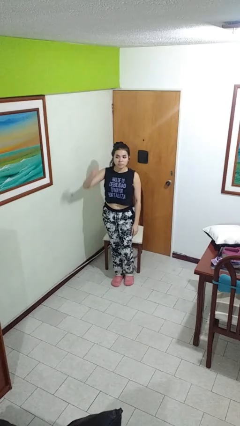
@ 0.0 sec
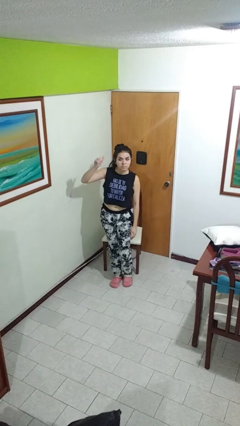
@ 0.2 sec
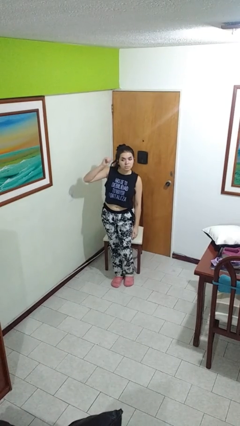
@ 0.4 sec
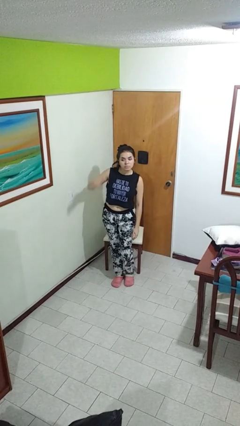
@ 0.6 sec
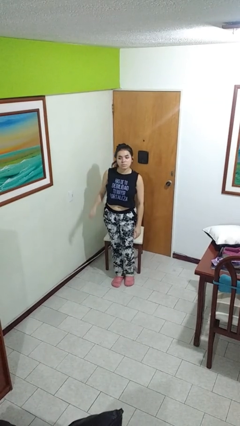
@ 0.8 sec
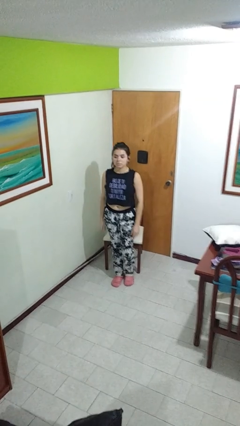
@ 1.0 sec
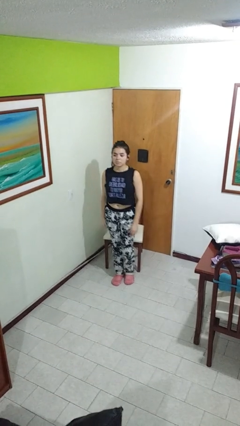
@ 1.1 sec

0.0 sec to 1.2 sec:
person gestures behind me

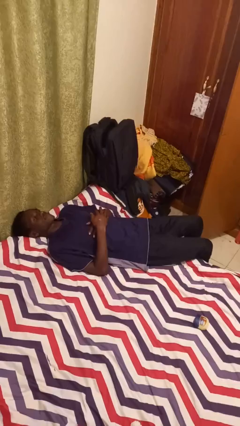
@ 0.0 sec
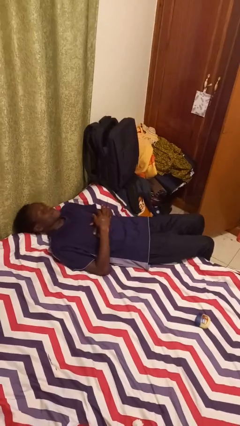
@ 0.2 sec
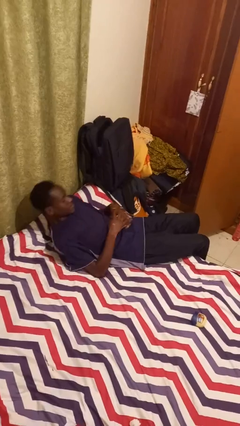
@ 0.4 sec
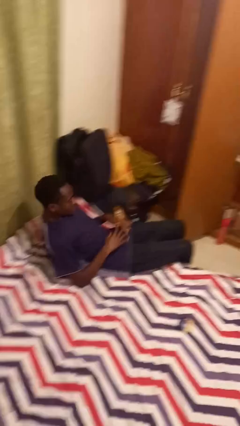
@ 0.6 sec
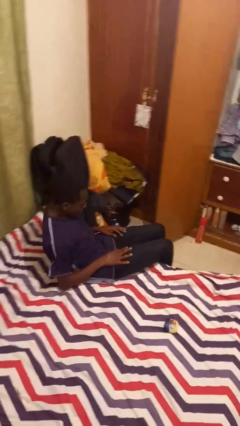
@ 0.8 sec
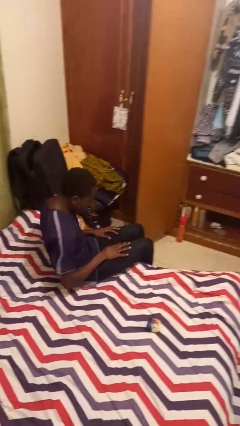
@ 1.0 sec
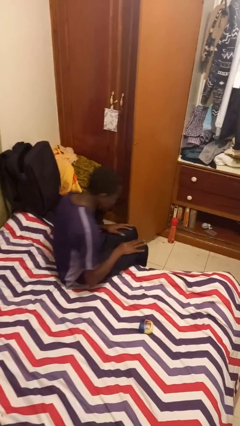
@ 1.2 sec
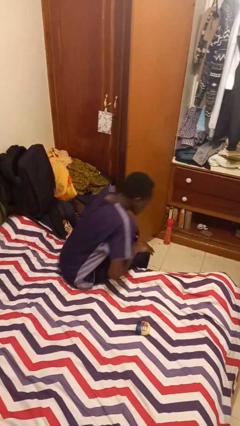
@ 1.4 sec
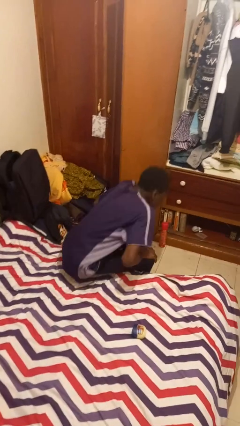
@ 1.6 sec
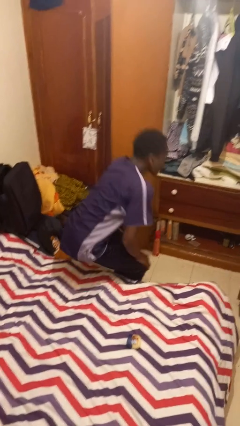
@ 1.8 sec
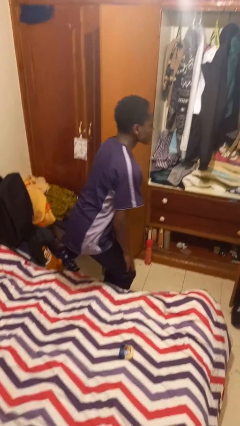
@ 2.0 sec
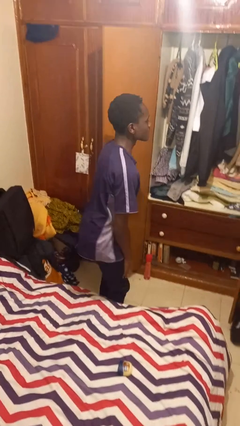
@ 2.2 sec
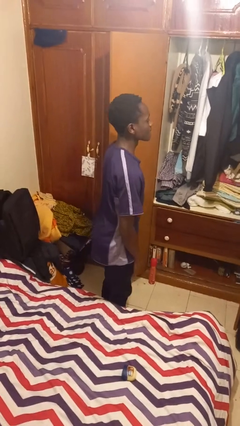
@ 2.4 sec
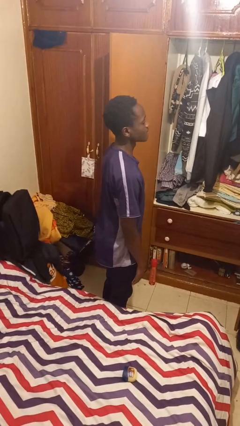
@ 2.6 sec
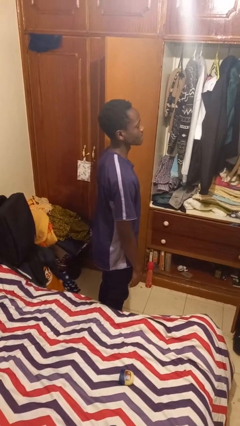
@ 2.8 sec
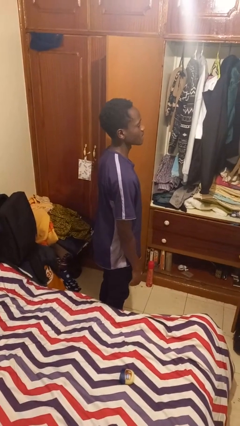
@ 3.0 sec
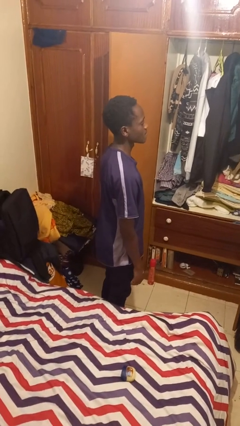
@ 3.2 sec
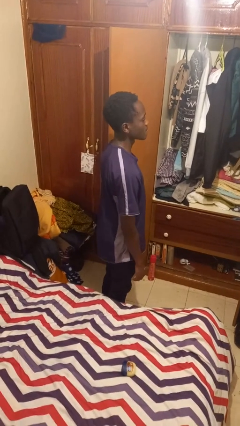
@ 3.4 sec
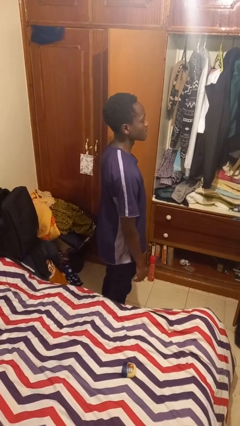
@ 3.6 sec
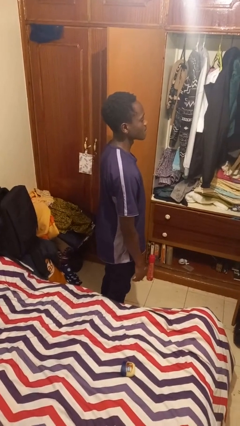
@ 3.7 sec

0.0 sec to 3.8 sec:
person stands up

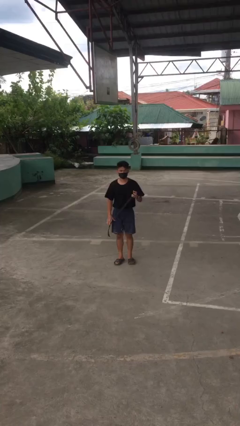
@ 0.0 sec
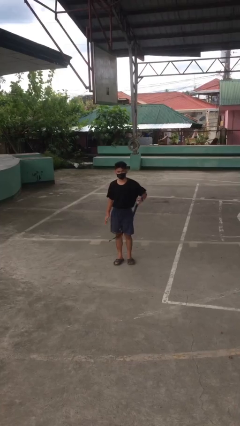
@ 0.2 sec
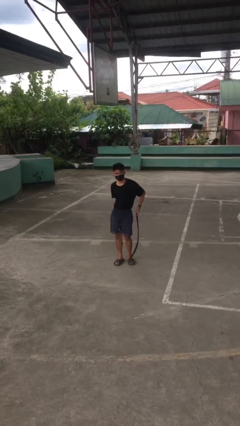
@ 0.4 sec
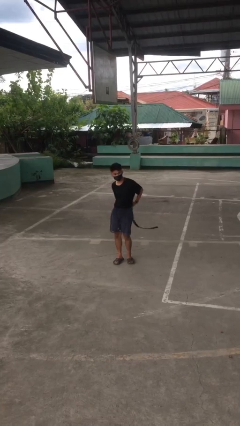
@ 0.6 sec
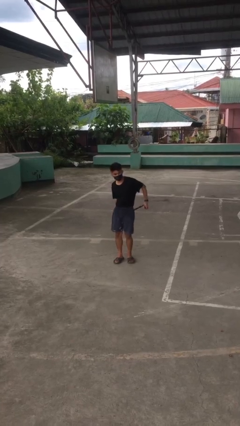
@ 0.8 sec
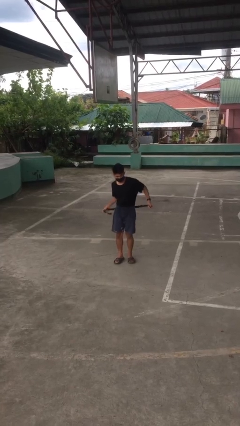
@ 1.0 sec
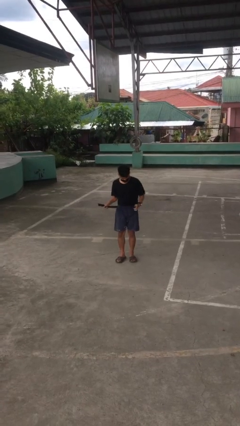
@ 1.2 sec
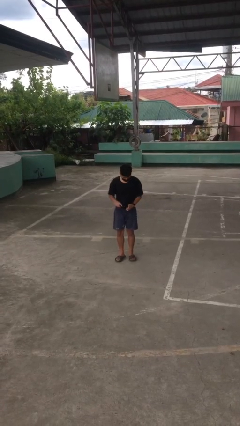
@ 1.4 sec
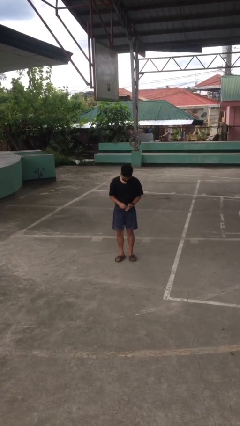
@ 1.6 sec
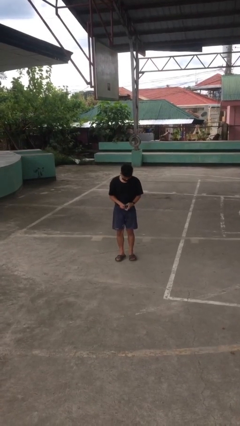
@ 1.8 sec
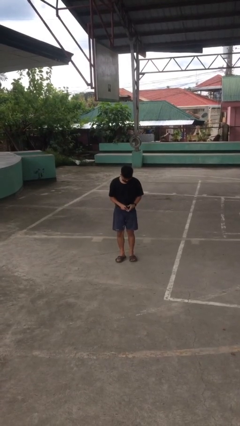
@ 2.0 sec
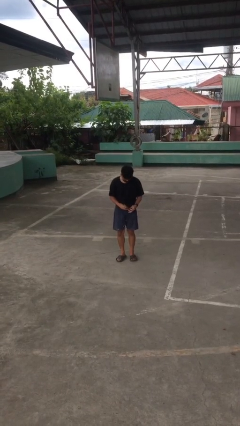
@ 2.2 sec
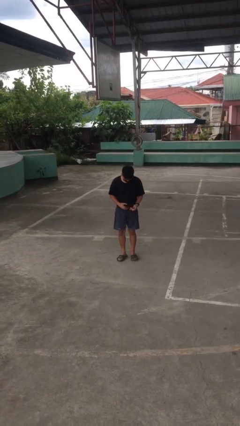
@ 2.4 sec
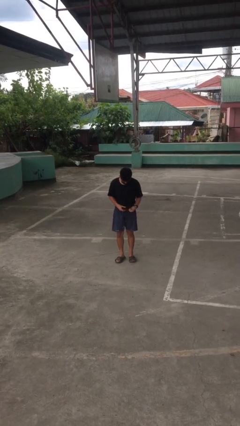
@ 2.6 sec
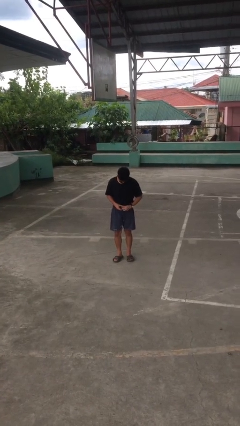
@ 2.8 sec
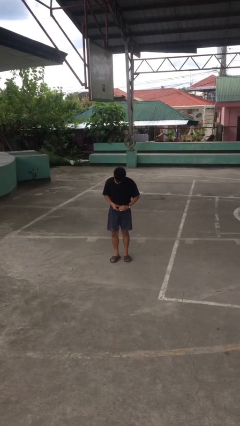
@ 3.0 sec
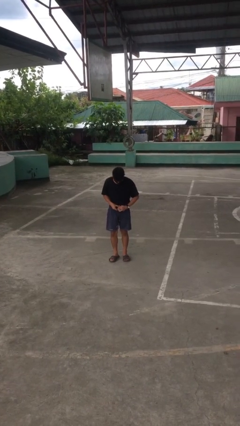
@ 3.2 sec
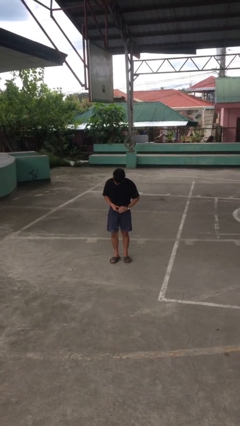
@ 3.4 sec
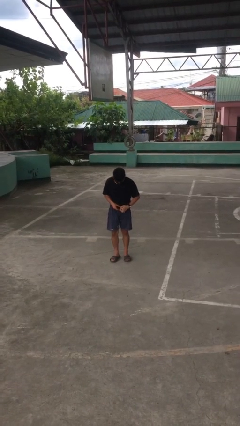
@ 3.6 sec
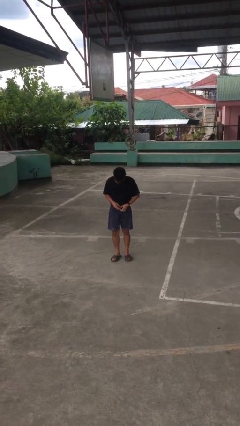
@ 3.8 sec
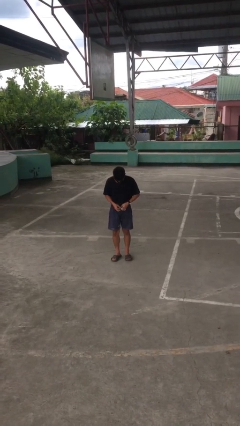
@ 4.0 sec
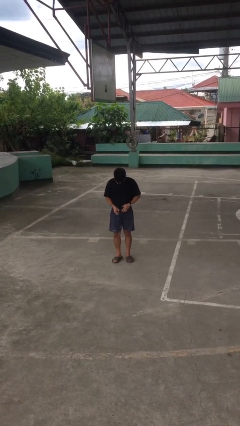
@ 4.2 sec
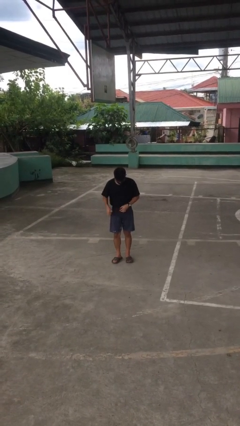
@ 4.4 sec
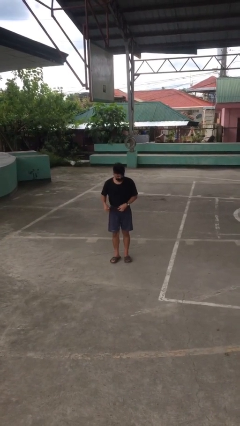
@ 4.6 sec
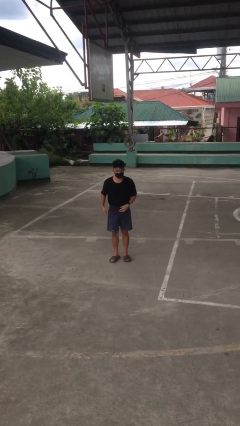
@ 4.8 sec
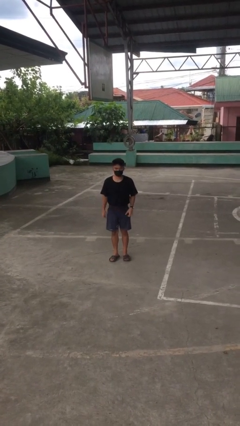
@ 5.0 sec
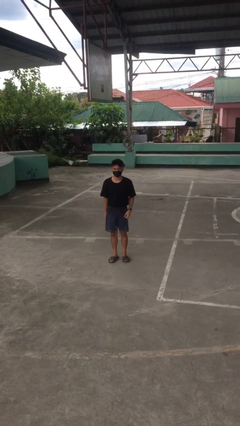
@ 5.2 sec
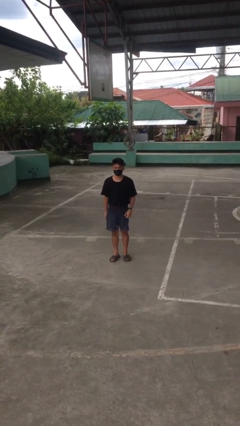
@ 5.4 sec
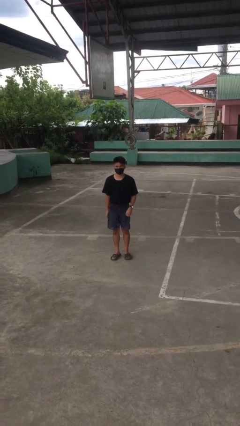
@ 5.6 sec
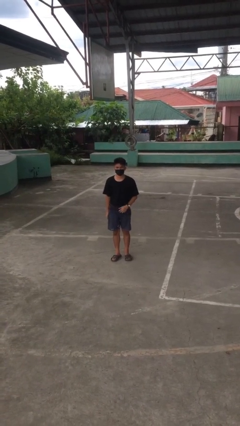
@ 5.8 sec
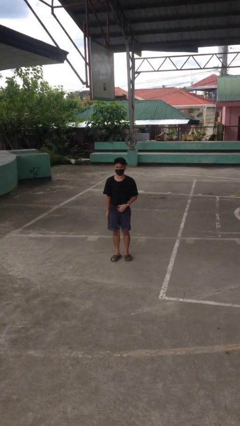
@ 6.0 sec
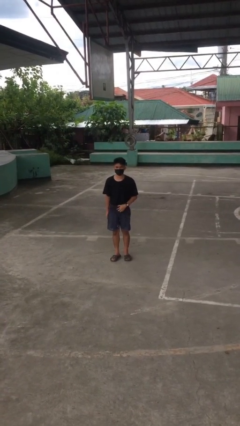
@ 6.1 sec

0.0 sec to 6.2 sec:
person puts on belt

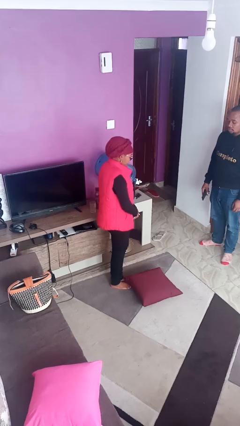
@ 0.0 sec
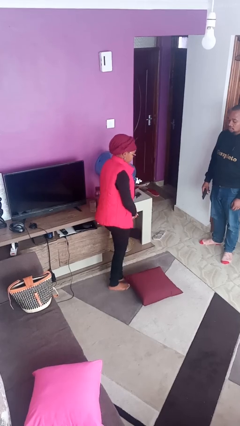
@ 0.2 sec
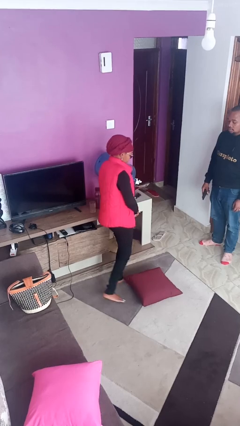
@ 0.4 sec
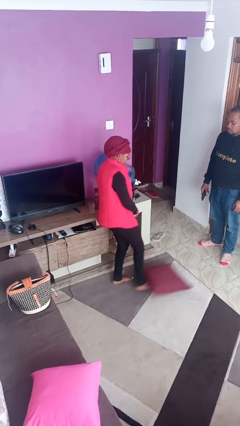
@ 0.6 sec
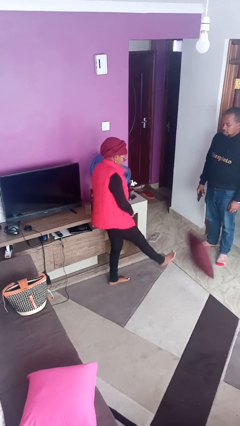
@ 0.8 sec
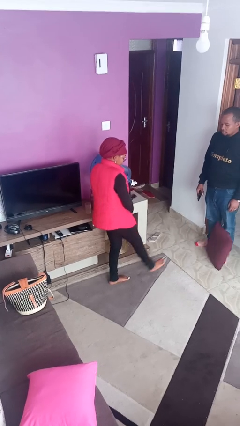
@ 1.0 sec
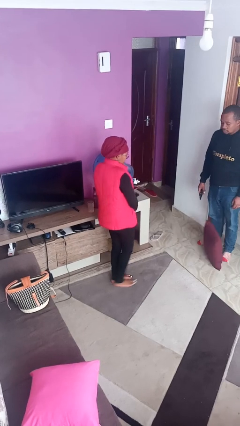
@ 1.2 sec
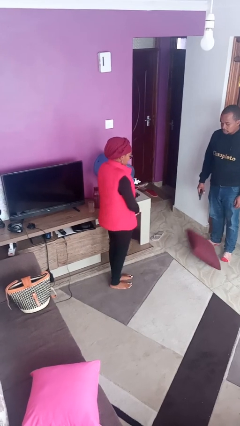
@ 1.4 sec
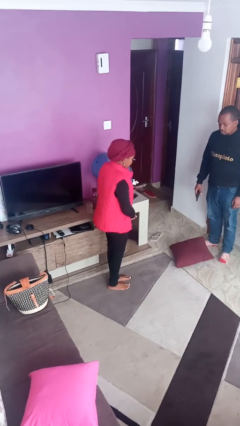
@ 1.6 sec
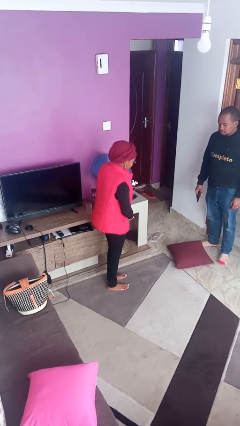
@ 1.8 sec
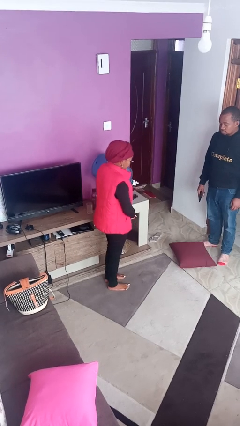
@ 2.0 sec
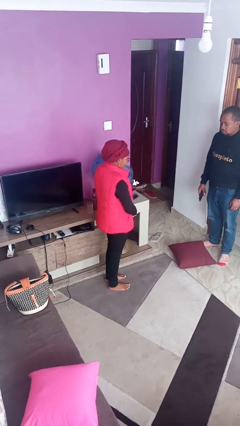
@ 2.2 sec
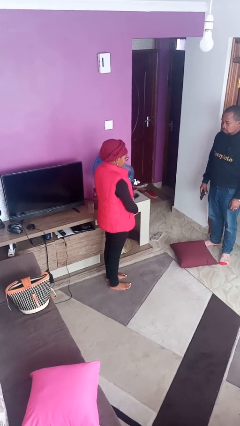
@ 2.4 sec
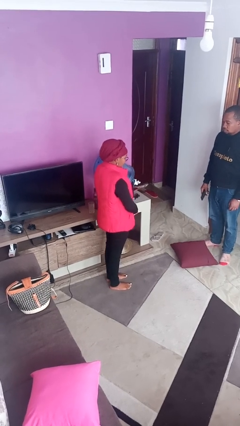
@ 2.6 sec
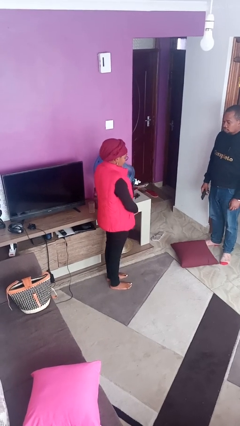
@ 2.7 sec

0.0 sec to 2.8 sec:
person kicks object to person

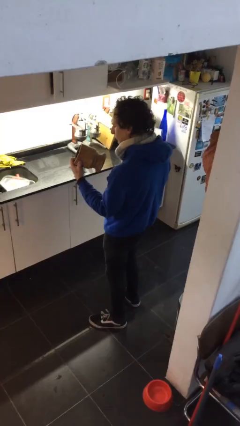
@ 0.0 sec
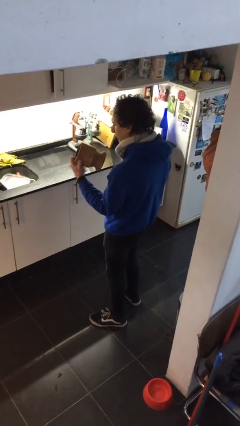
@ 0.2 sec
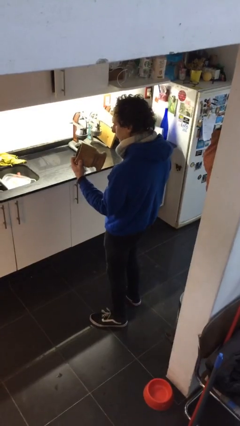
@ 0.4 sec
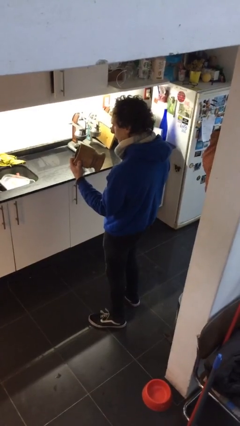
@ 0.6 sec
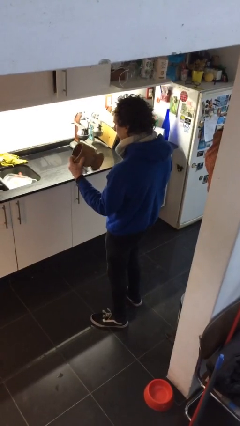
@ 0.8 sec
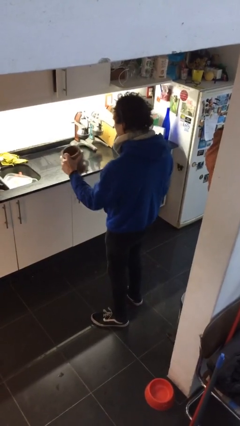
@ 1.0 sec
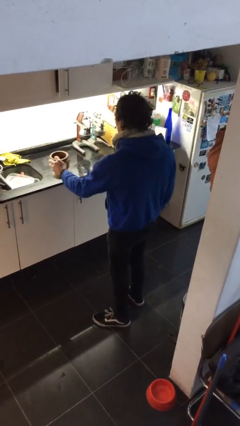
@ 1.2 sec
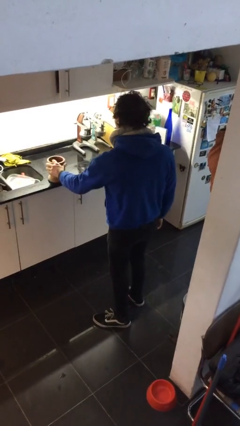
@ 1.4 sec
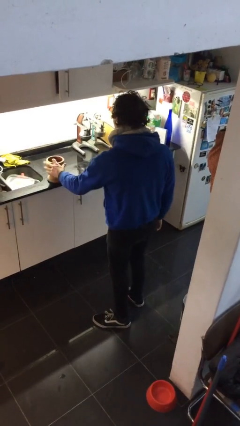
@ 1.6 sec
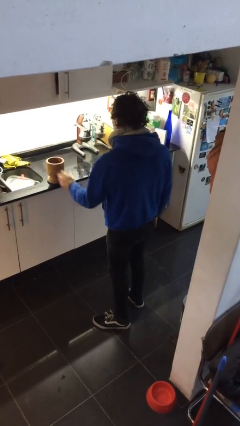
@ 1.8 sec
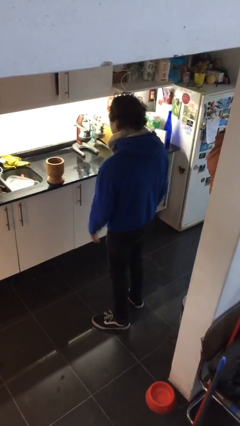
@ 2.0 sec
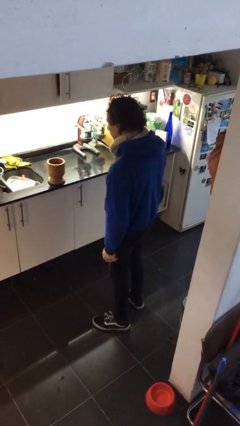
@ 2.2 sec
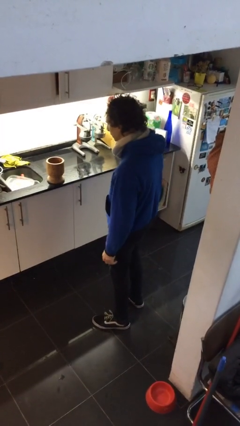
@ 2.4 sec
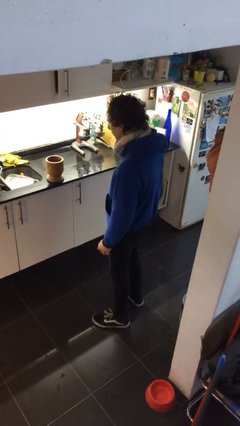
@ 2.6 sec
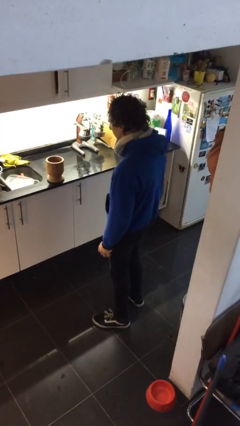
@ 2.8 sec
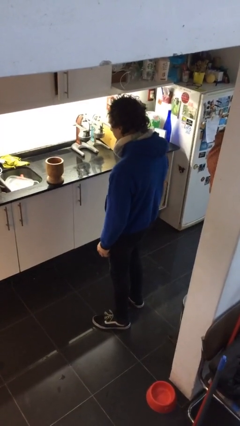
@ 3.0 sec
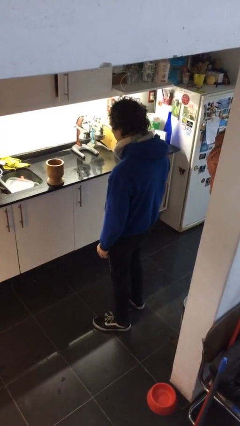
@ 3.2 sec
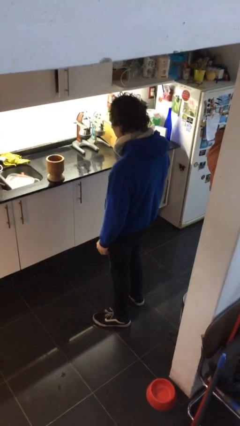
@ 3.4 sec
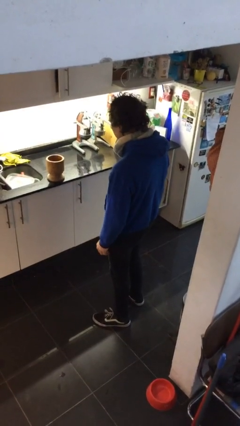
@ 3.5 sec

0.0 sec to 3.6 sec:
person puts down object on countertop
